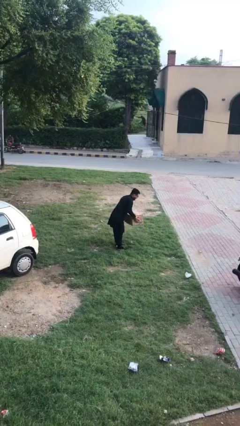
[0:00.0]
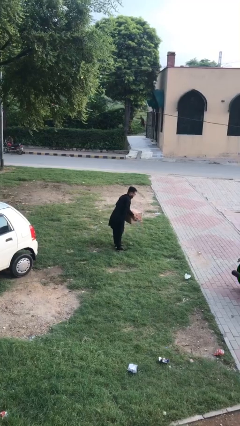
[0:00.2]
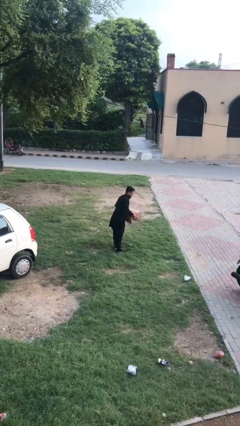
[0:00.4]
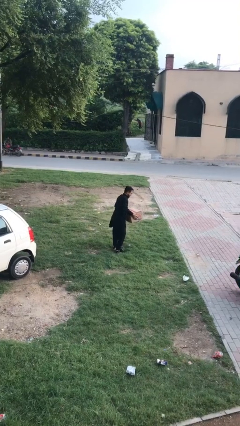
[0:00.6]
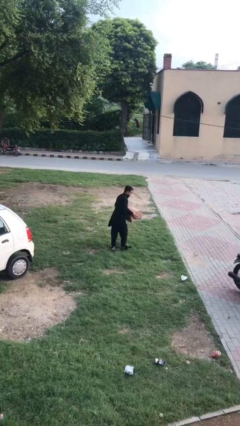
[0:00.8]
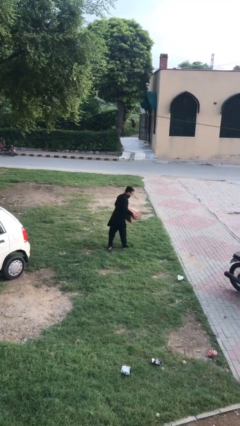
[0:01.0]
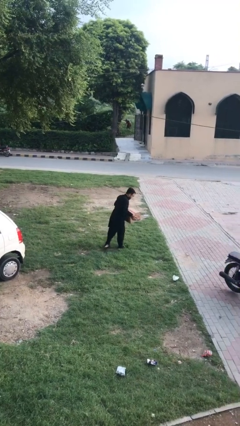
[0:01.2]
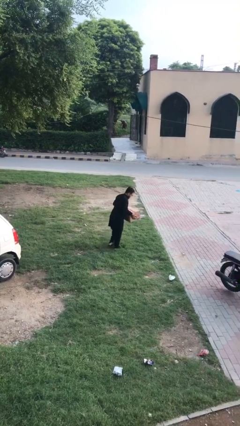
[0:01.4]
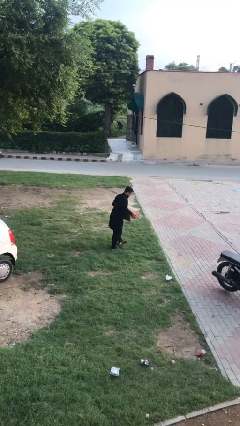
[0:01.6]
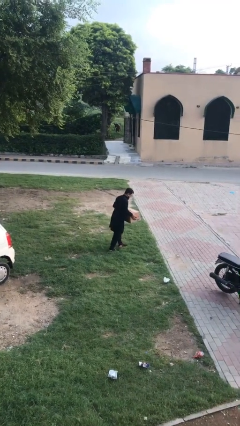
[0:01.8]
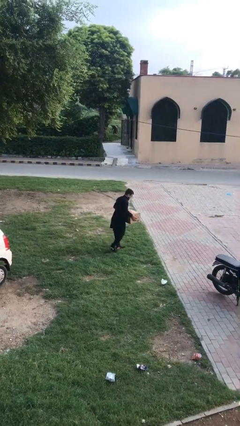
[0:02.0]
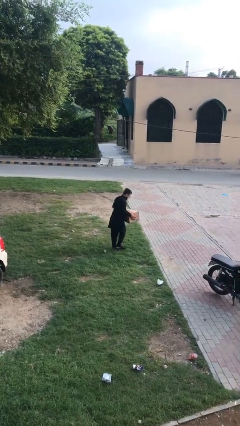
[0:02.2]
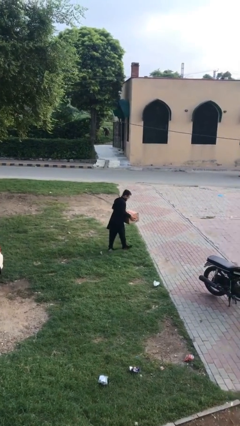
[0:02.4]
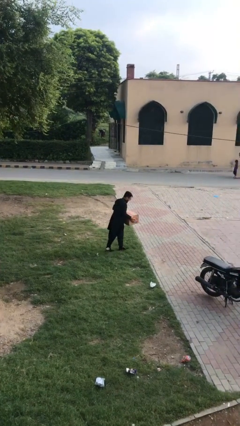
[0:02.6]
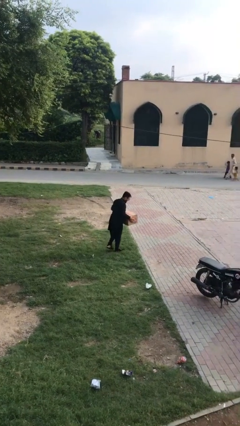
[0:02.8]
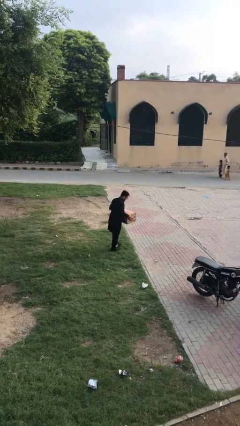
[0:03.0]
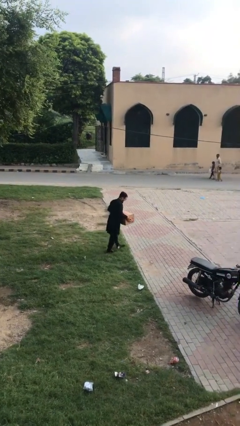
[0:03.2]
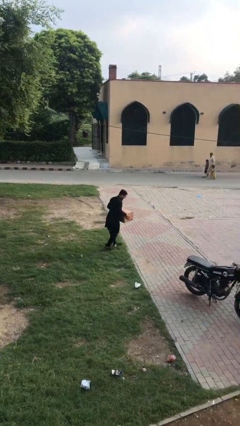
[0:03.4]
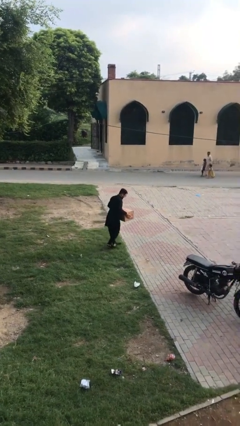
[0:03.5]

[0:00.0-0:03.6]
person carries heavy object

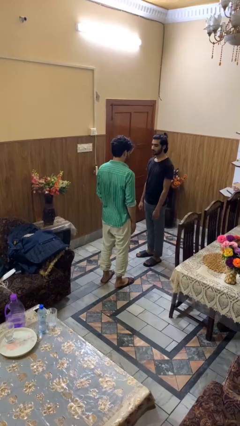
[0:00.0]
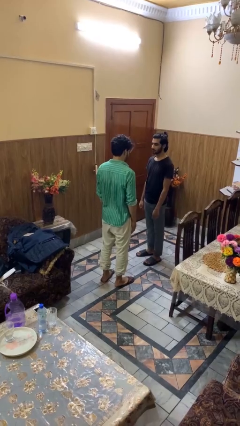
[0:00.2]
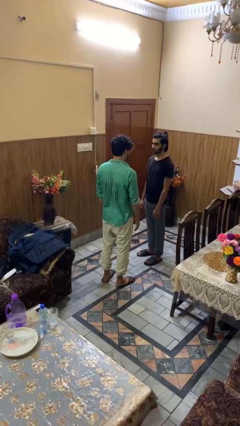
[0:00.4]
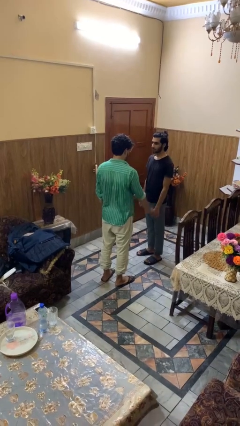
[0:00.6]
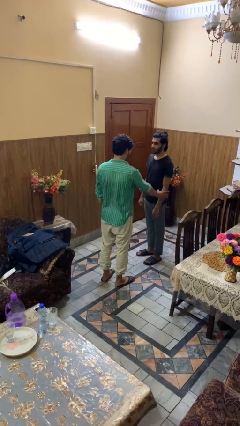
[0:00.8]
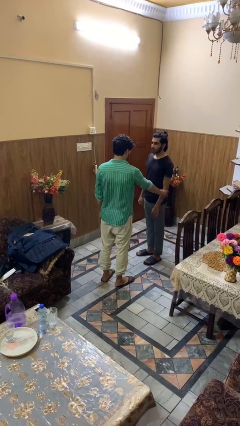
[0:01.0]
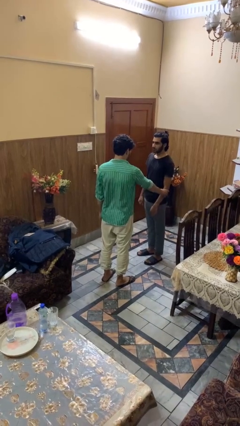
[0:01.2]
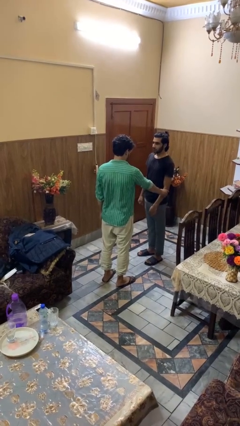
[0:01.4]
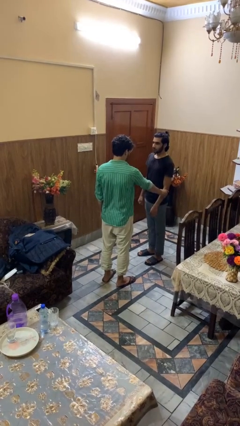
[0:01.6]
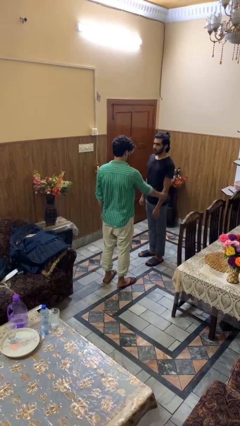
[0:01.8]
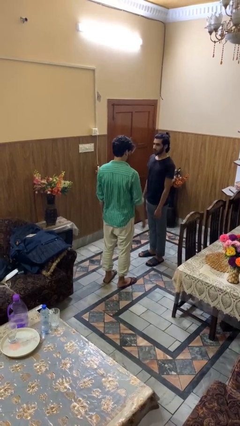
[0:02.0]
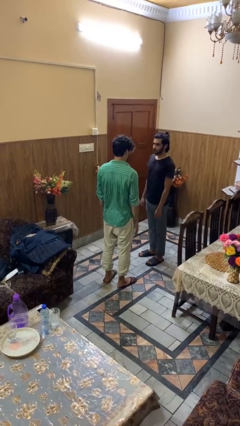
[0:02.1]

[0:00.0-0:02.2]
person grabs person by forearm

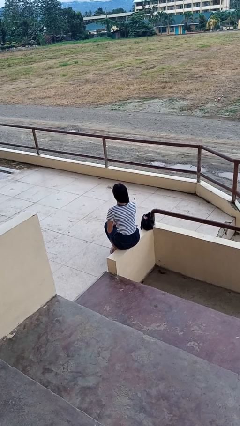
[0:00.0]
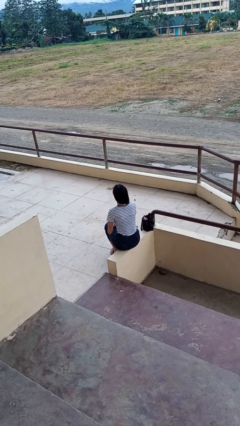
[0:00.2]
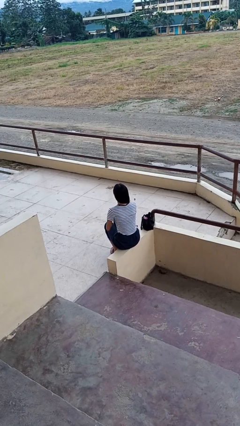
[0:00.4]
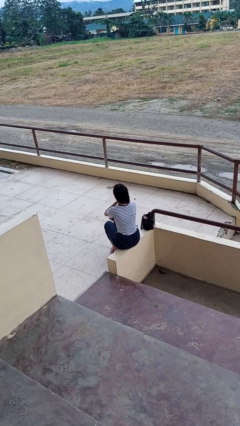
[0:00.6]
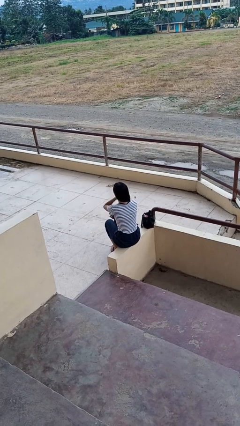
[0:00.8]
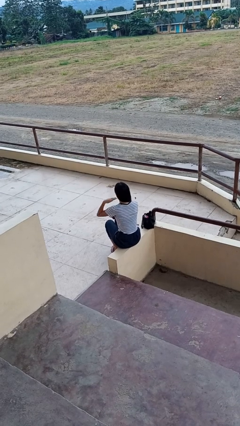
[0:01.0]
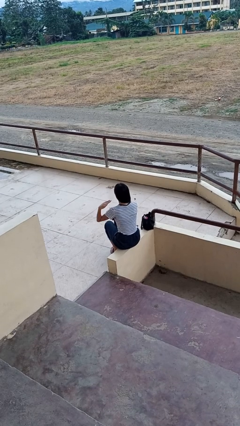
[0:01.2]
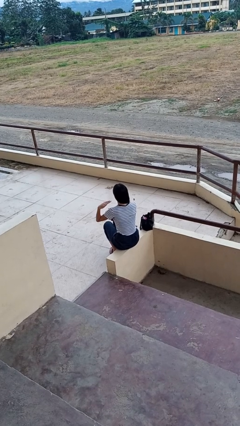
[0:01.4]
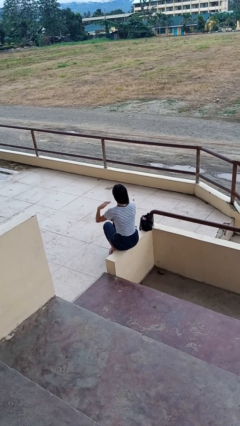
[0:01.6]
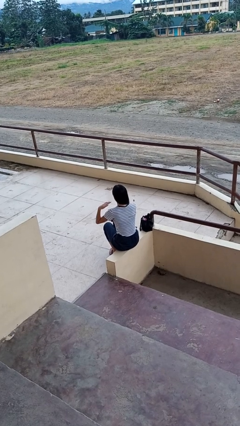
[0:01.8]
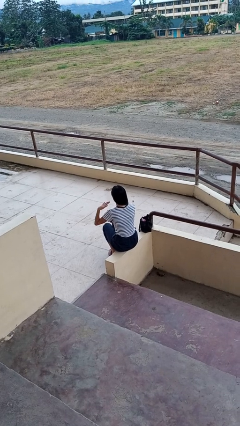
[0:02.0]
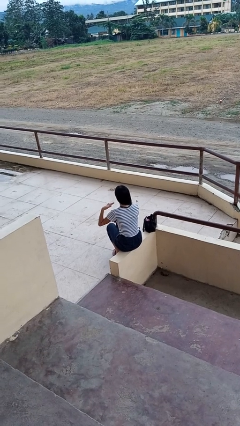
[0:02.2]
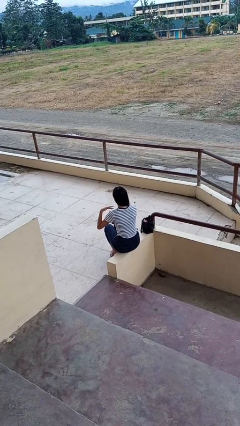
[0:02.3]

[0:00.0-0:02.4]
person gestures cut

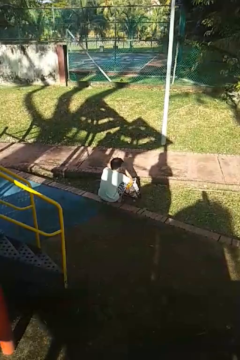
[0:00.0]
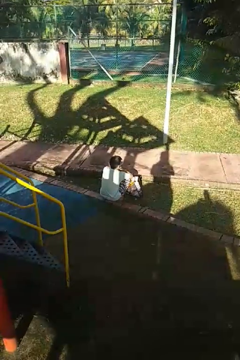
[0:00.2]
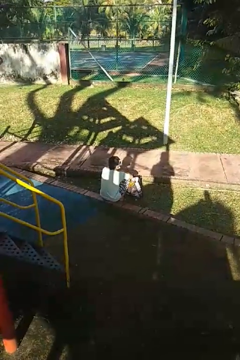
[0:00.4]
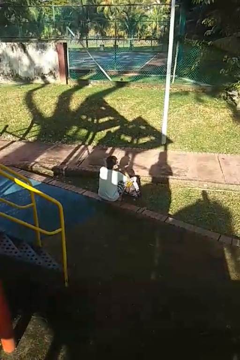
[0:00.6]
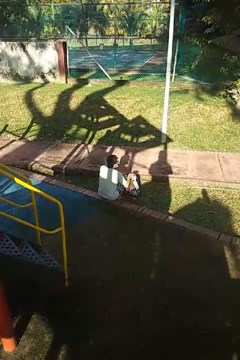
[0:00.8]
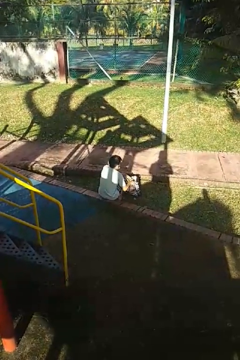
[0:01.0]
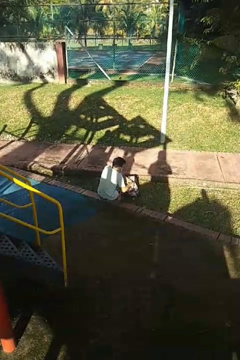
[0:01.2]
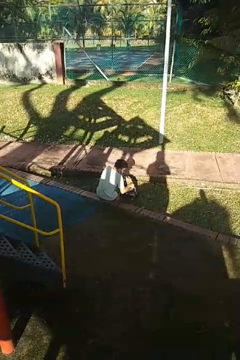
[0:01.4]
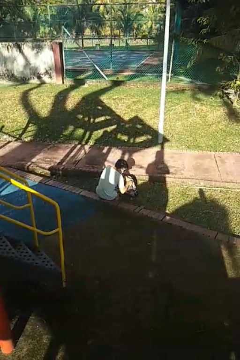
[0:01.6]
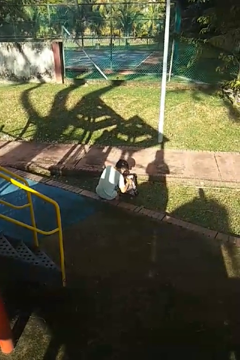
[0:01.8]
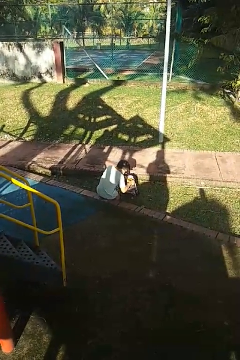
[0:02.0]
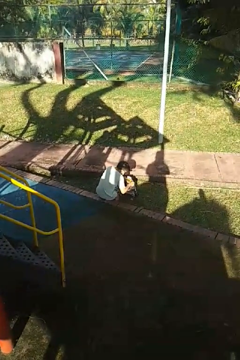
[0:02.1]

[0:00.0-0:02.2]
person searches in bag

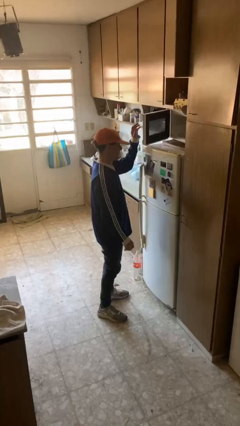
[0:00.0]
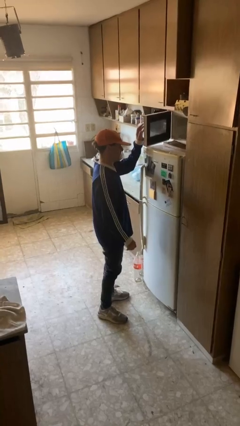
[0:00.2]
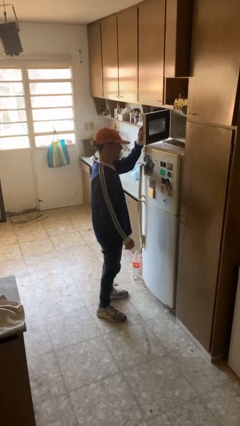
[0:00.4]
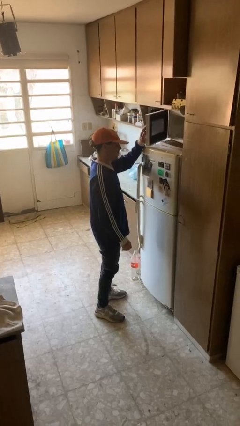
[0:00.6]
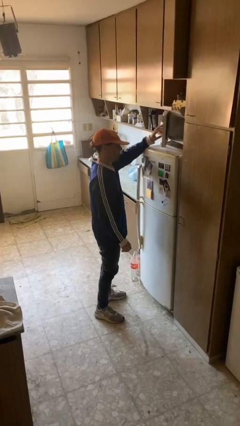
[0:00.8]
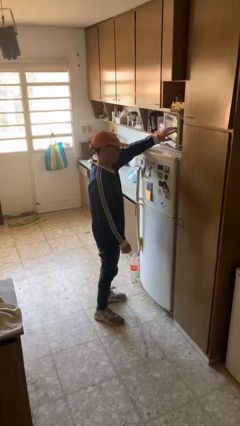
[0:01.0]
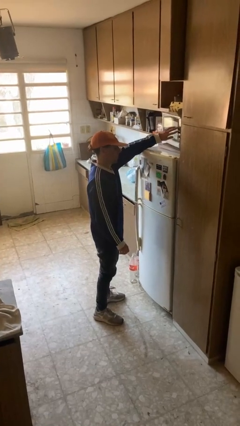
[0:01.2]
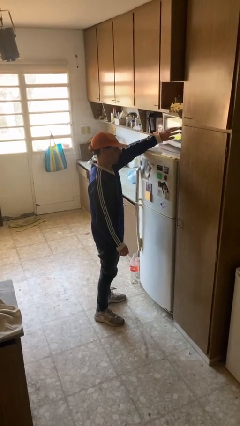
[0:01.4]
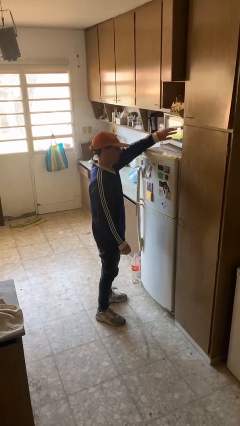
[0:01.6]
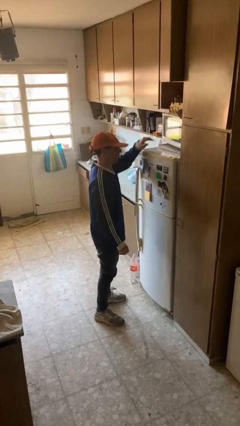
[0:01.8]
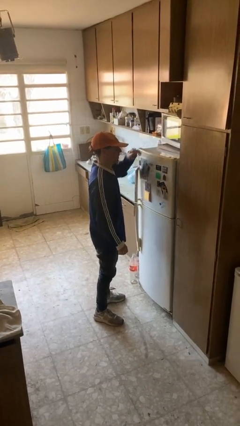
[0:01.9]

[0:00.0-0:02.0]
person closes microwave

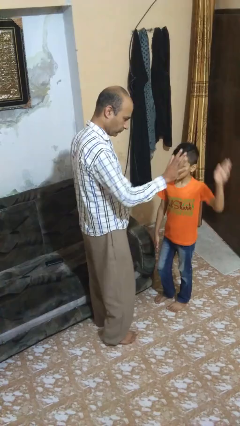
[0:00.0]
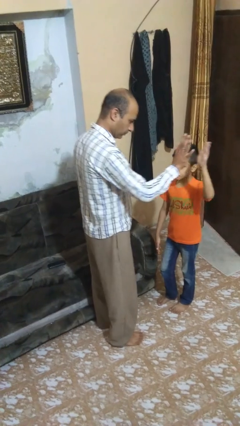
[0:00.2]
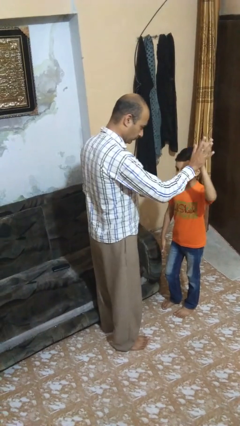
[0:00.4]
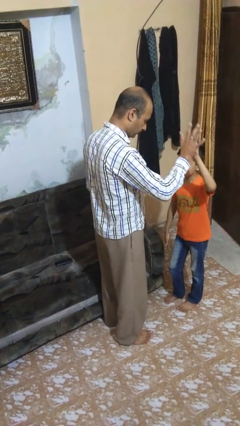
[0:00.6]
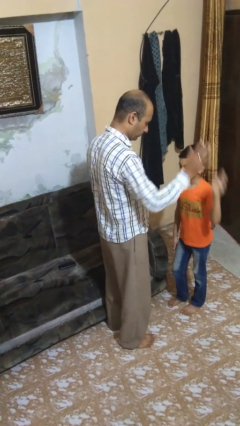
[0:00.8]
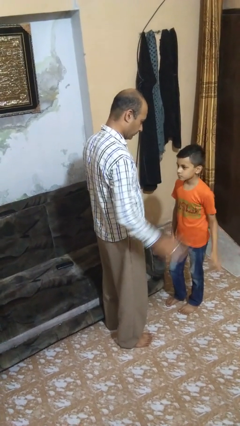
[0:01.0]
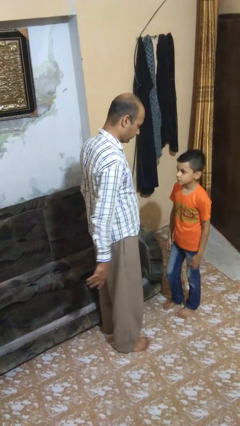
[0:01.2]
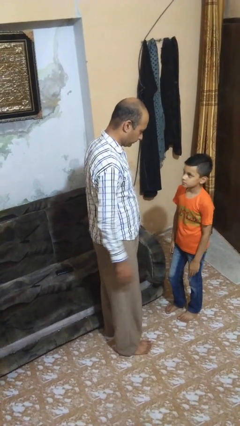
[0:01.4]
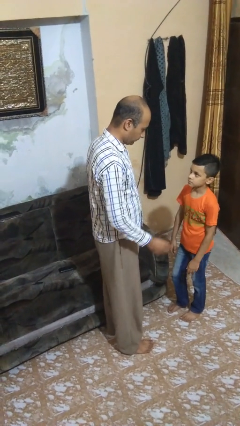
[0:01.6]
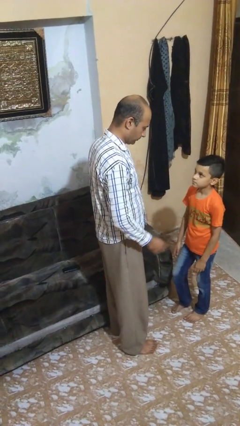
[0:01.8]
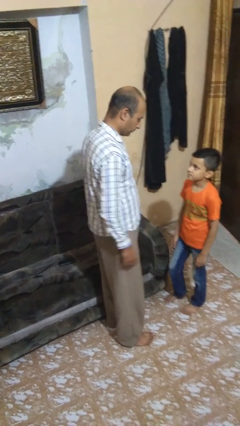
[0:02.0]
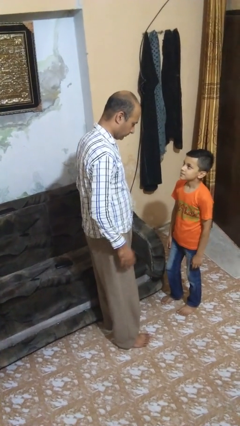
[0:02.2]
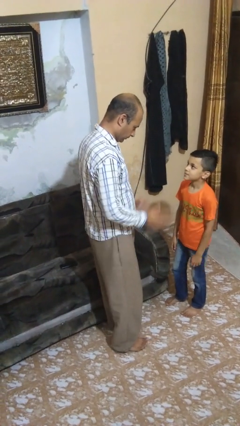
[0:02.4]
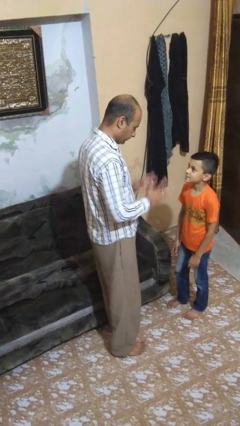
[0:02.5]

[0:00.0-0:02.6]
person highfives hand

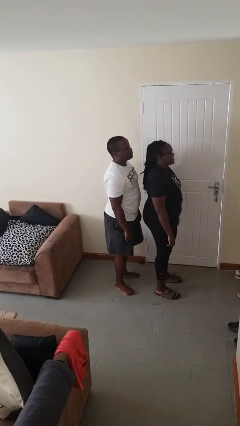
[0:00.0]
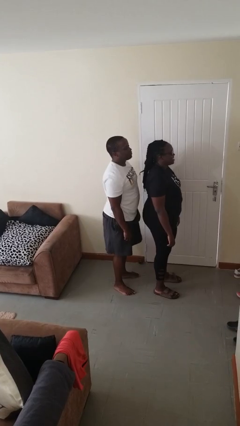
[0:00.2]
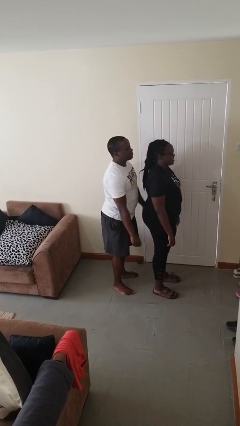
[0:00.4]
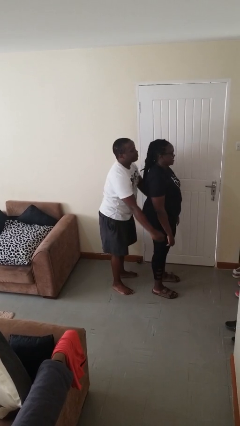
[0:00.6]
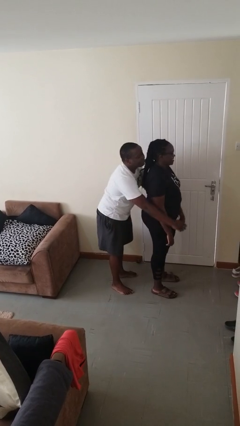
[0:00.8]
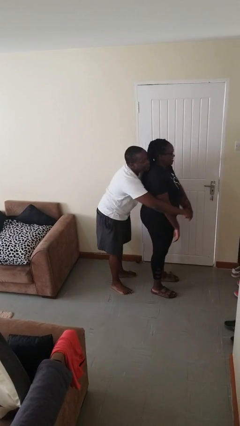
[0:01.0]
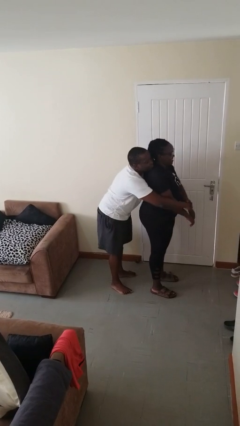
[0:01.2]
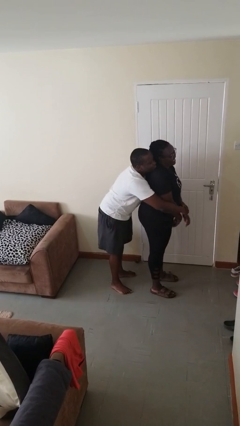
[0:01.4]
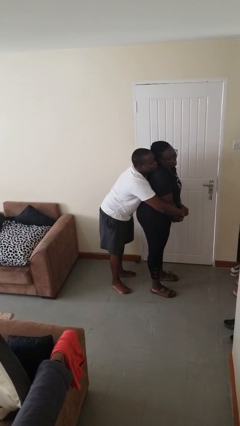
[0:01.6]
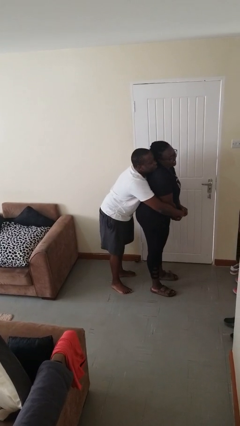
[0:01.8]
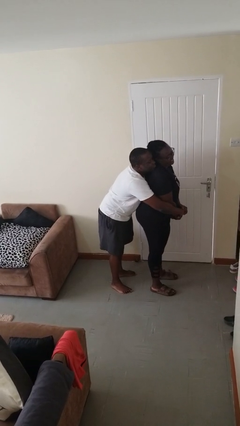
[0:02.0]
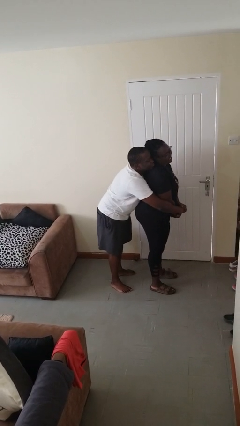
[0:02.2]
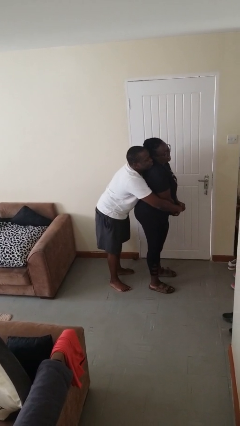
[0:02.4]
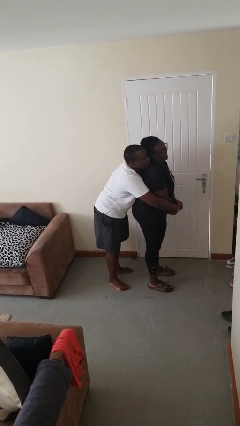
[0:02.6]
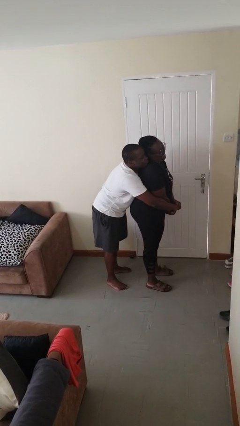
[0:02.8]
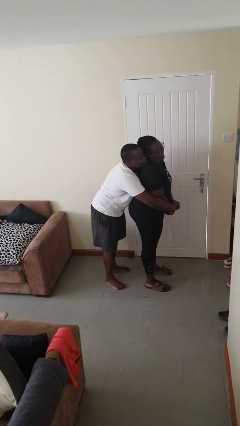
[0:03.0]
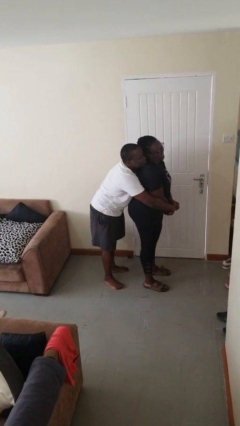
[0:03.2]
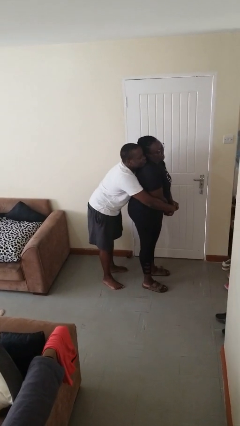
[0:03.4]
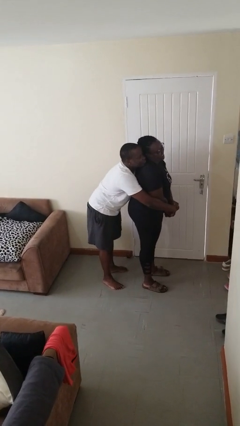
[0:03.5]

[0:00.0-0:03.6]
person hugs person from behind
